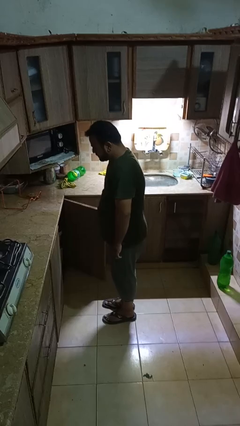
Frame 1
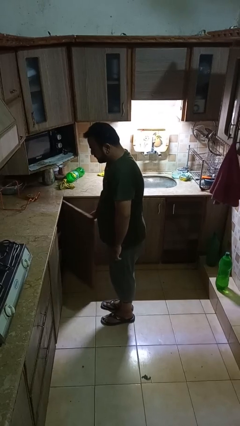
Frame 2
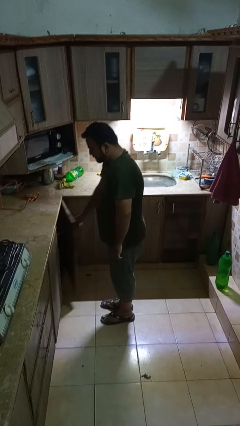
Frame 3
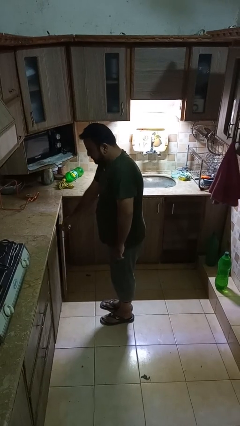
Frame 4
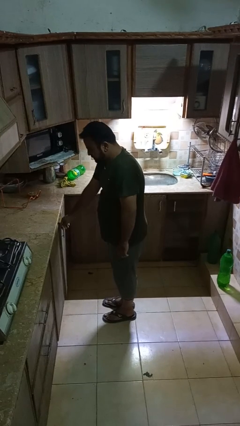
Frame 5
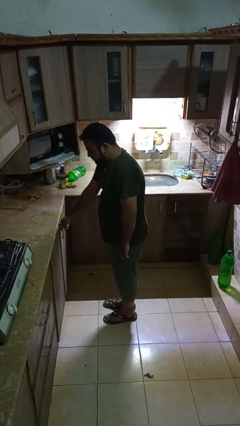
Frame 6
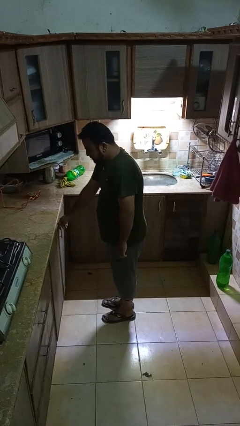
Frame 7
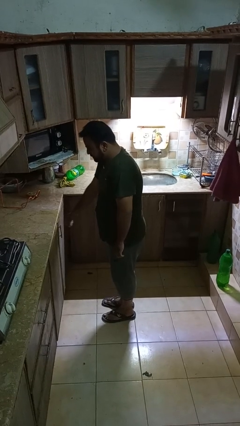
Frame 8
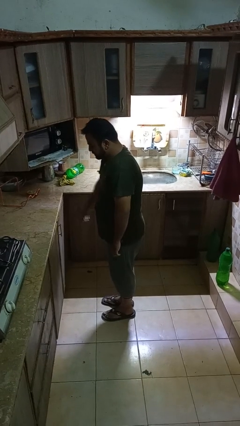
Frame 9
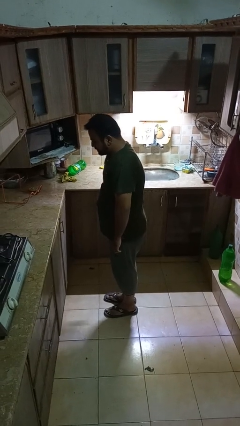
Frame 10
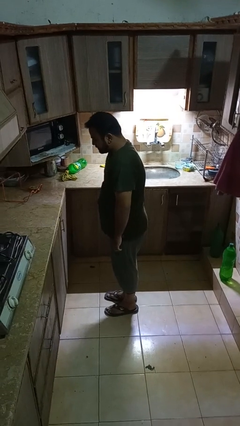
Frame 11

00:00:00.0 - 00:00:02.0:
person closes cabinet

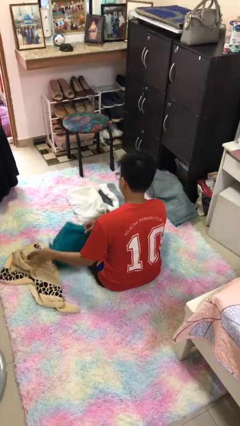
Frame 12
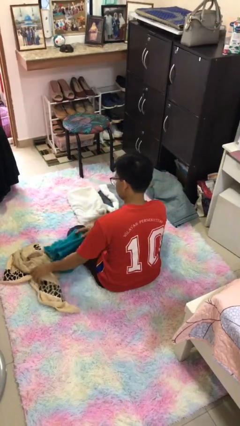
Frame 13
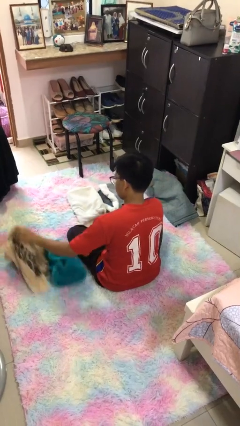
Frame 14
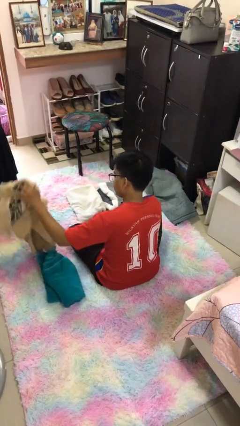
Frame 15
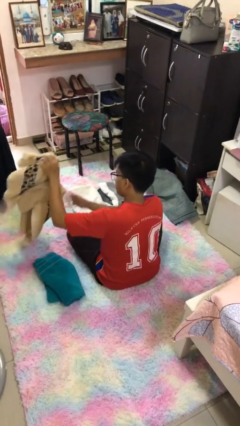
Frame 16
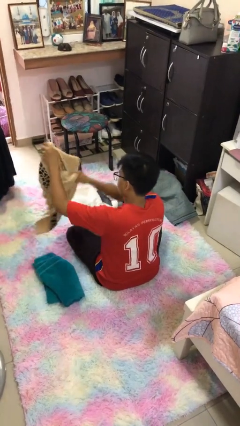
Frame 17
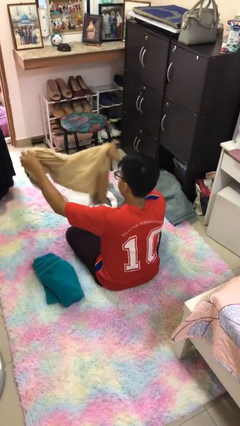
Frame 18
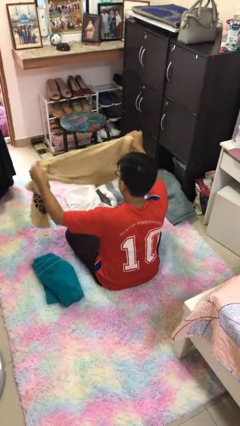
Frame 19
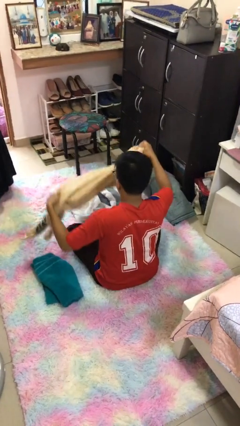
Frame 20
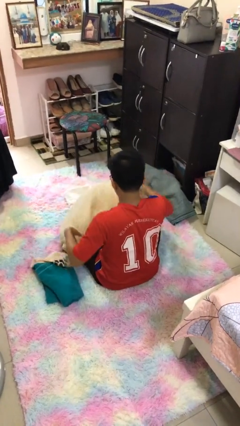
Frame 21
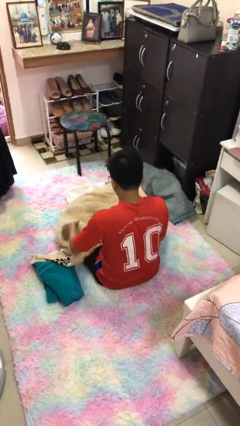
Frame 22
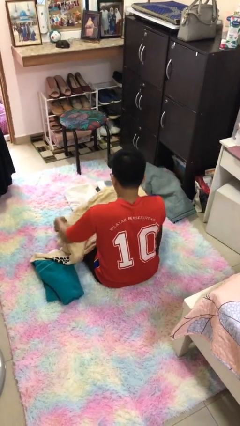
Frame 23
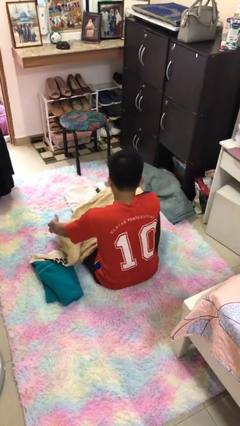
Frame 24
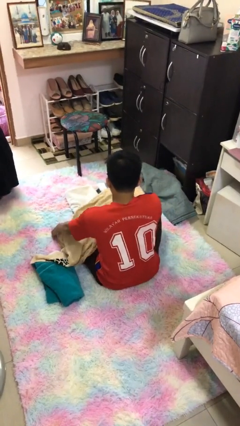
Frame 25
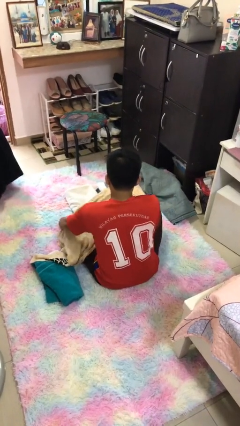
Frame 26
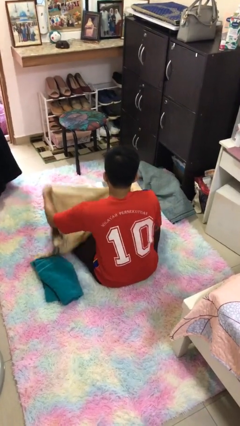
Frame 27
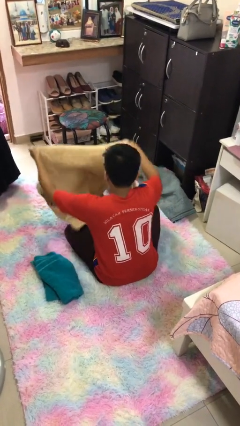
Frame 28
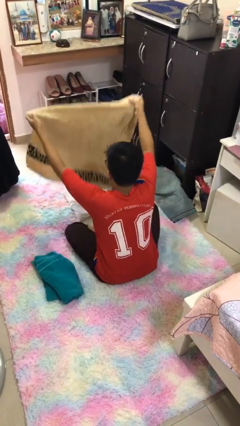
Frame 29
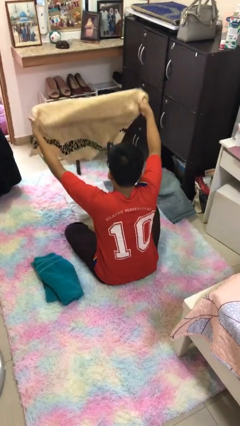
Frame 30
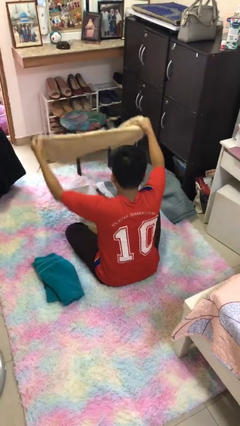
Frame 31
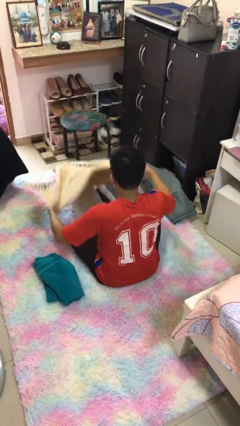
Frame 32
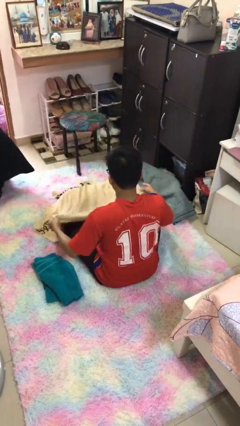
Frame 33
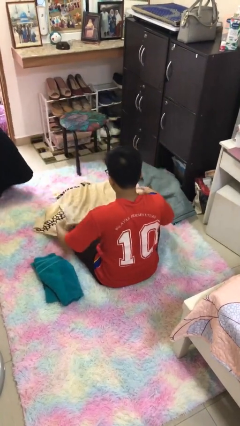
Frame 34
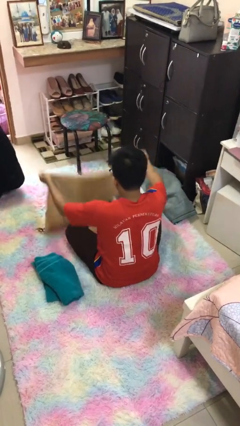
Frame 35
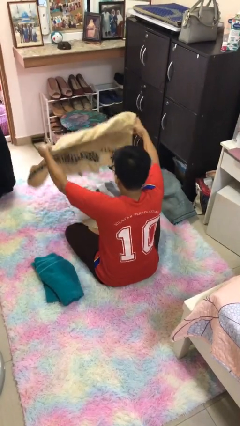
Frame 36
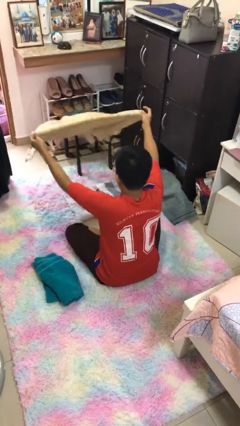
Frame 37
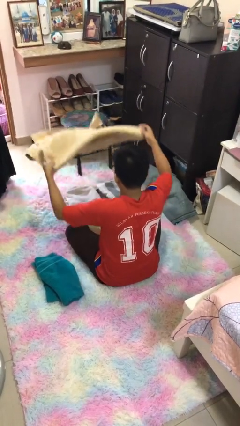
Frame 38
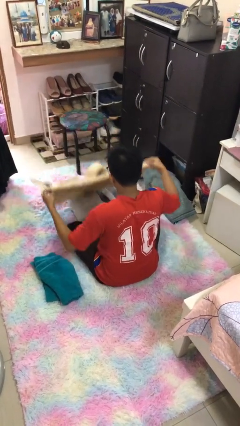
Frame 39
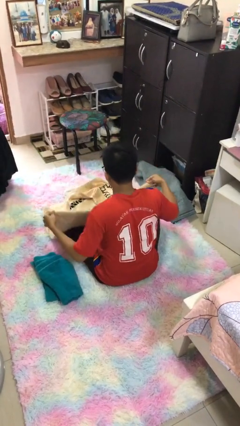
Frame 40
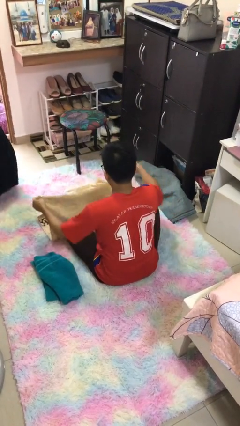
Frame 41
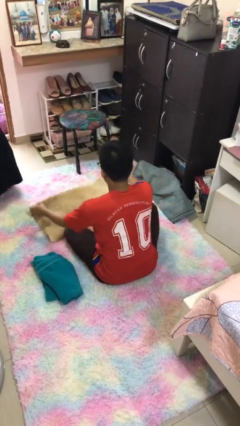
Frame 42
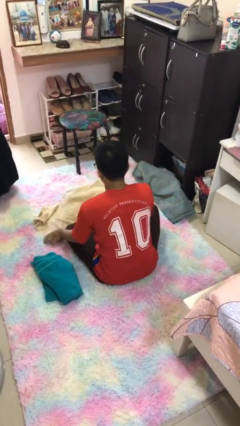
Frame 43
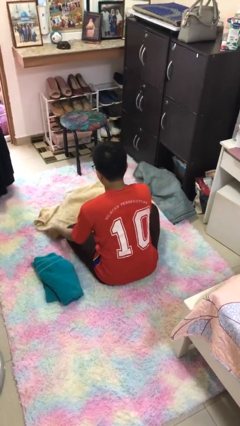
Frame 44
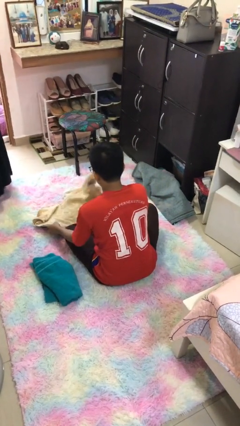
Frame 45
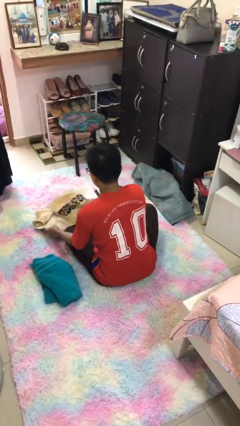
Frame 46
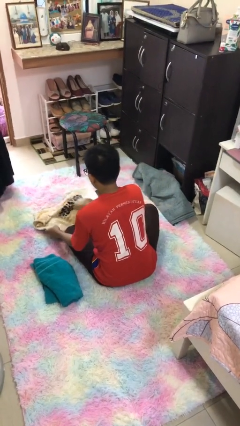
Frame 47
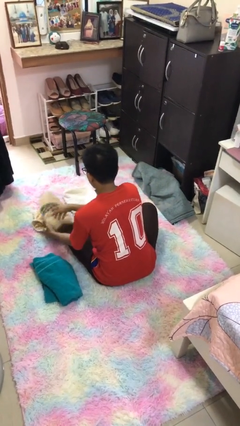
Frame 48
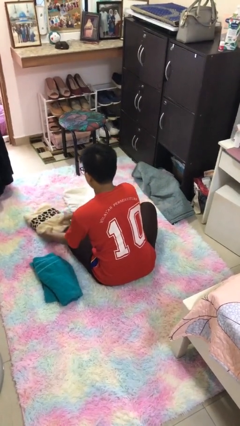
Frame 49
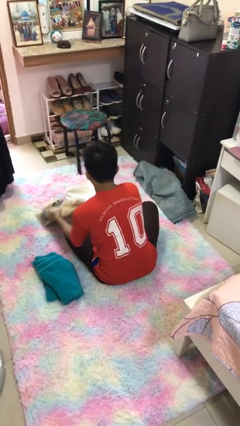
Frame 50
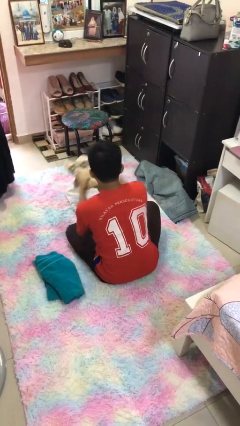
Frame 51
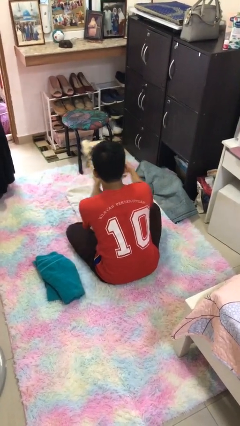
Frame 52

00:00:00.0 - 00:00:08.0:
person folds towel

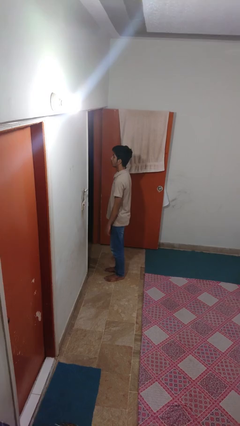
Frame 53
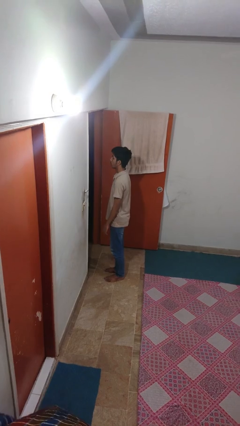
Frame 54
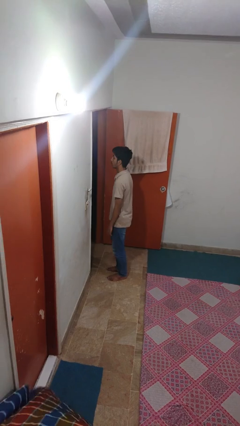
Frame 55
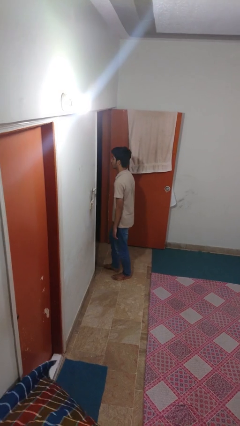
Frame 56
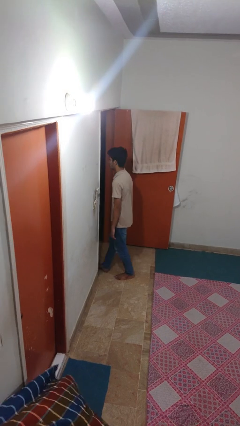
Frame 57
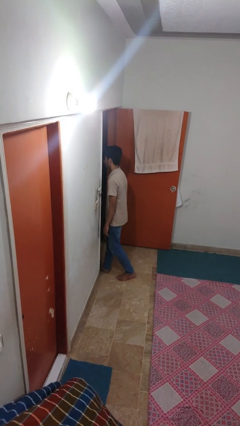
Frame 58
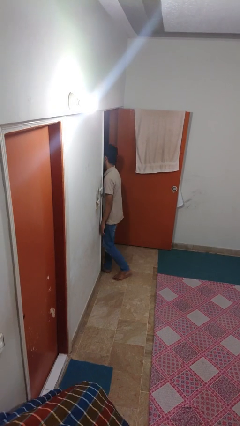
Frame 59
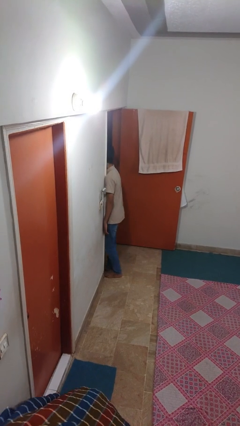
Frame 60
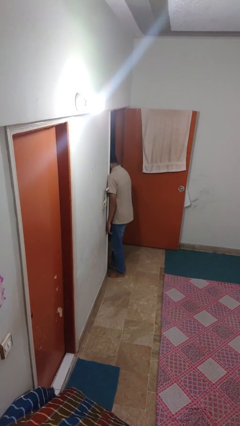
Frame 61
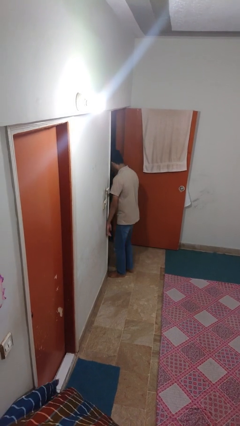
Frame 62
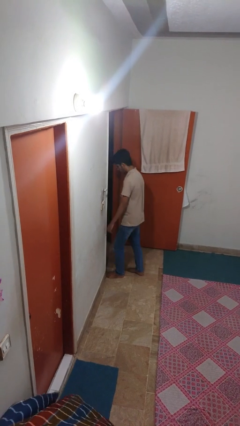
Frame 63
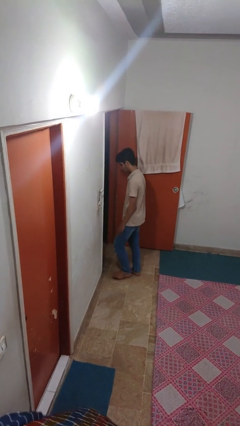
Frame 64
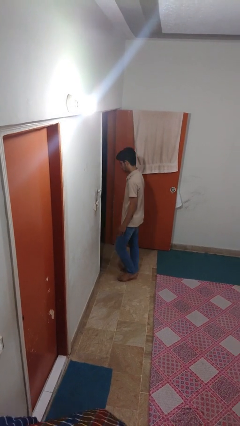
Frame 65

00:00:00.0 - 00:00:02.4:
person bumps into wall

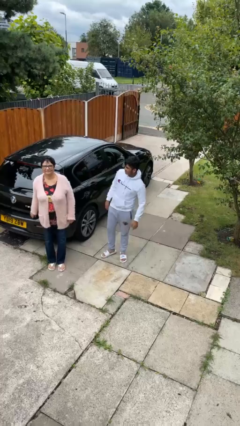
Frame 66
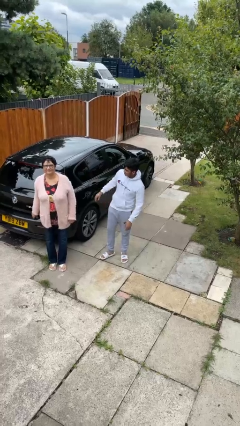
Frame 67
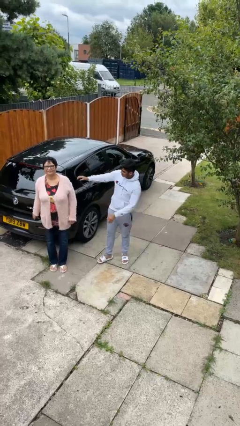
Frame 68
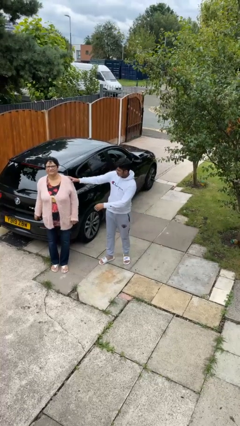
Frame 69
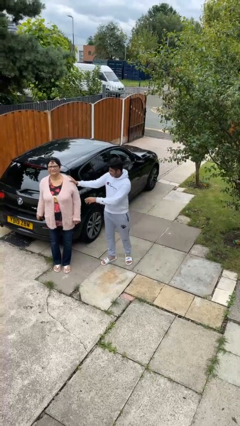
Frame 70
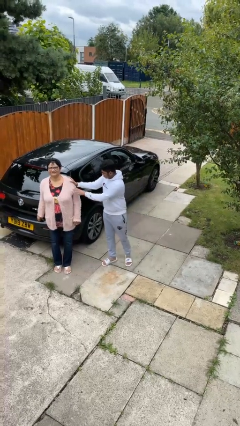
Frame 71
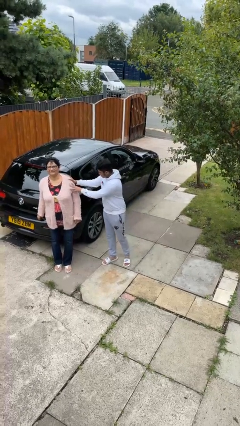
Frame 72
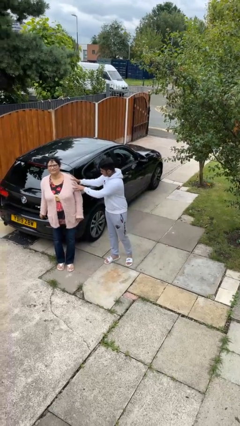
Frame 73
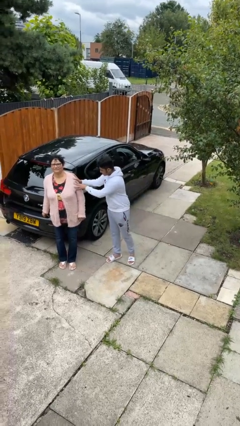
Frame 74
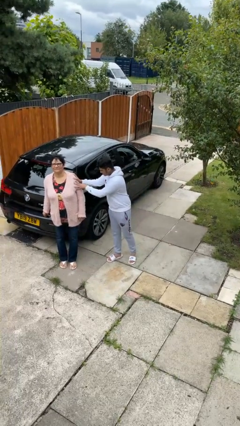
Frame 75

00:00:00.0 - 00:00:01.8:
person shoves person

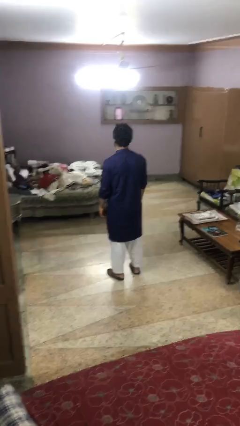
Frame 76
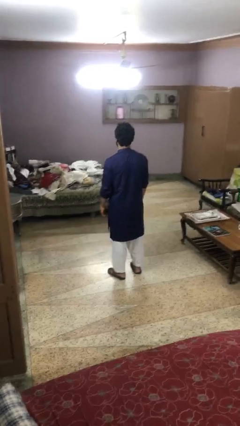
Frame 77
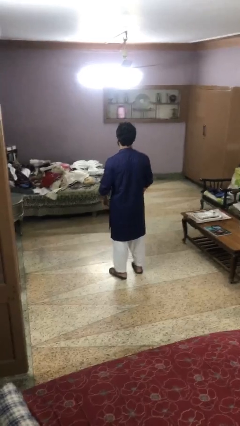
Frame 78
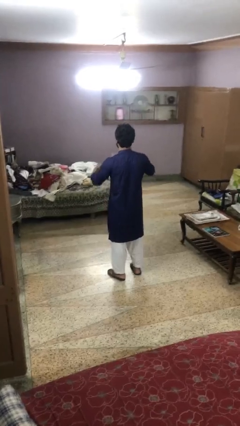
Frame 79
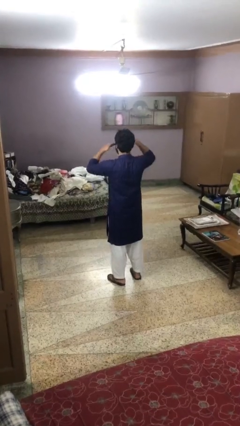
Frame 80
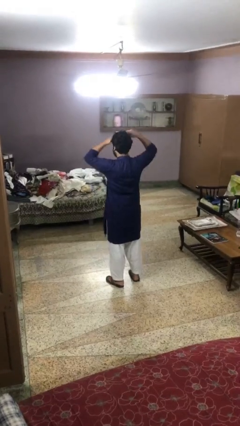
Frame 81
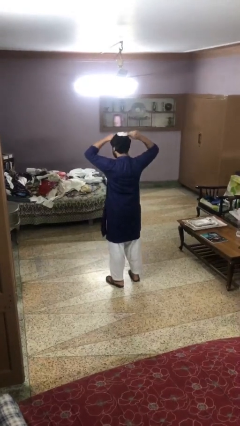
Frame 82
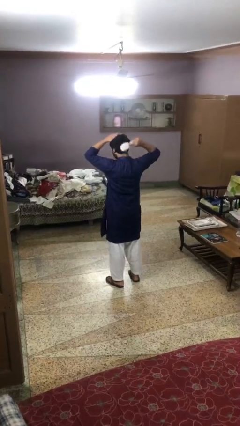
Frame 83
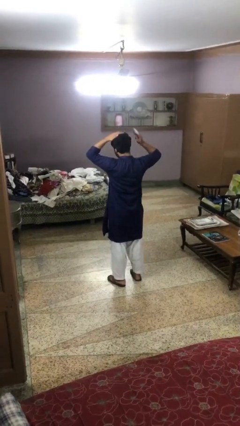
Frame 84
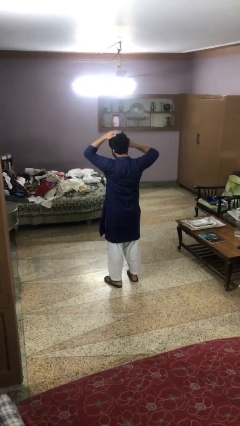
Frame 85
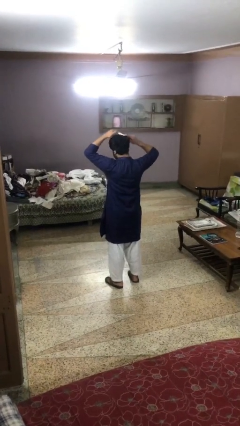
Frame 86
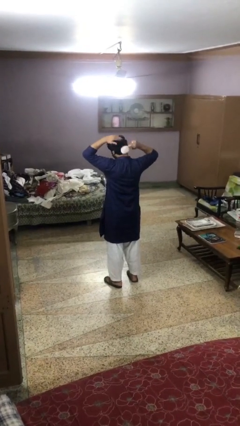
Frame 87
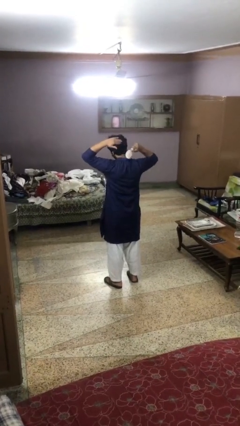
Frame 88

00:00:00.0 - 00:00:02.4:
person brushes hair

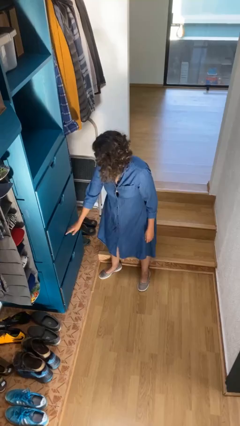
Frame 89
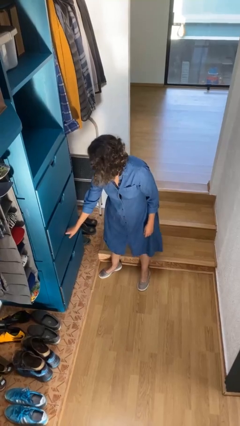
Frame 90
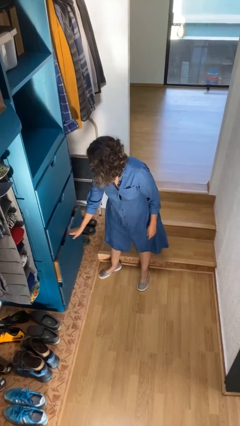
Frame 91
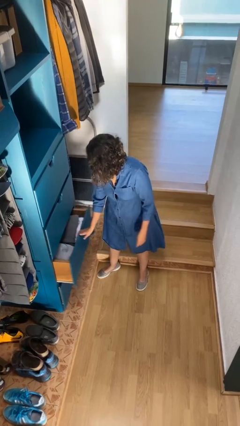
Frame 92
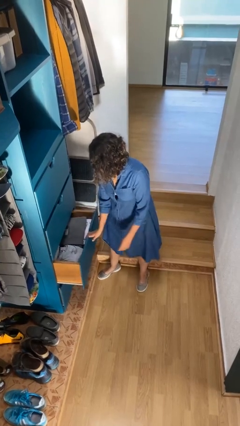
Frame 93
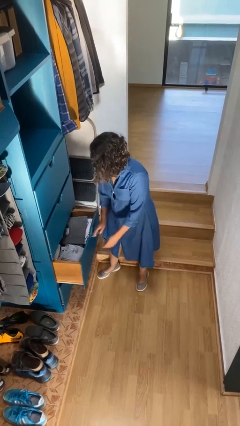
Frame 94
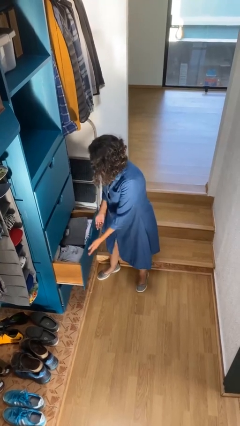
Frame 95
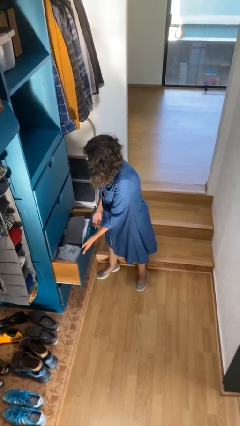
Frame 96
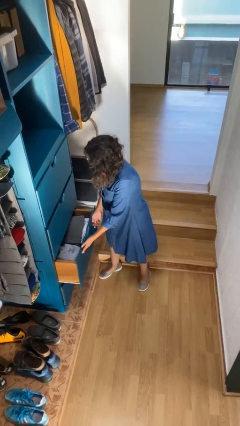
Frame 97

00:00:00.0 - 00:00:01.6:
person opens dresser drawer
